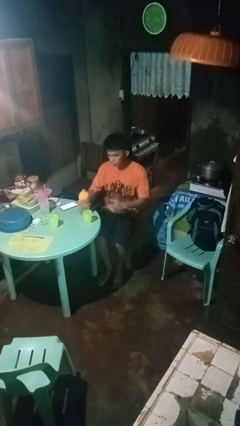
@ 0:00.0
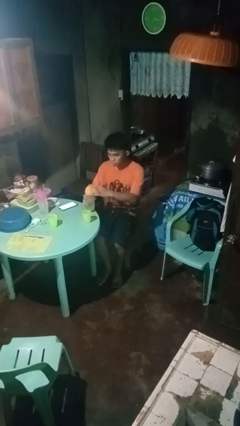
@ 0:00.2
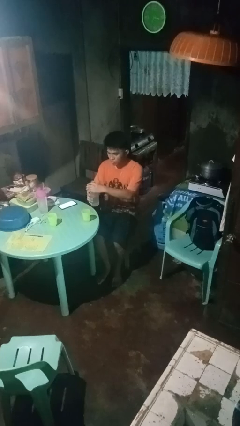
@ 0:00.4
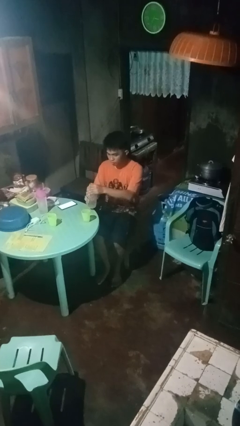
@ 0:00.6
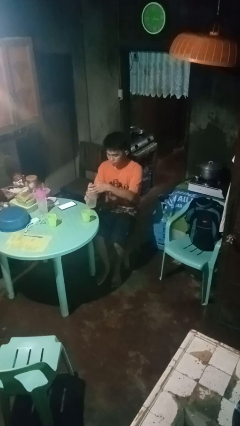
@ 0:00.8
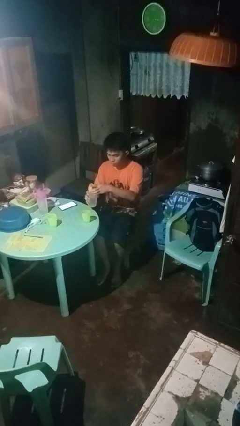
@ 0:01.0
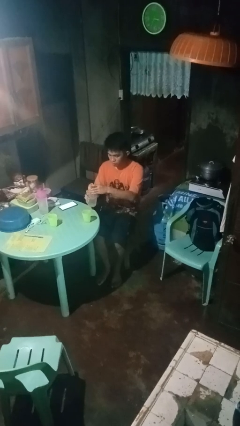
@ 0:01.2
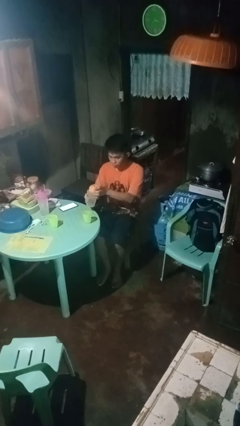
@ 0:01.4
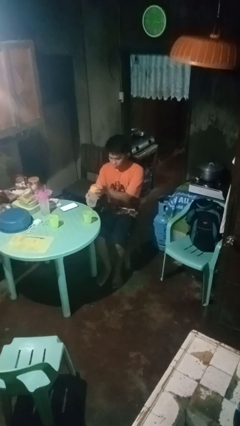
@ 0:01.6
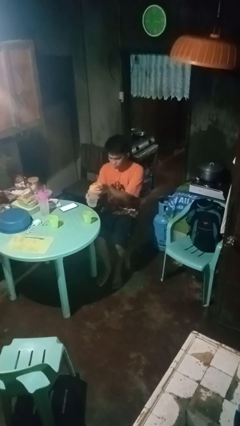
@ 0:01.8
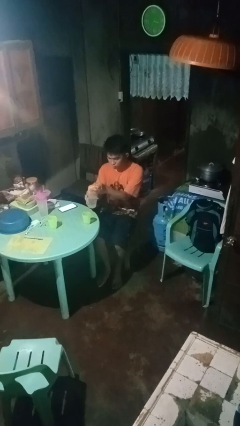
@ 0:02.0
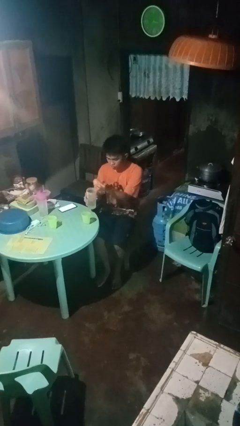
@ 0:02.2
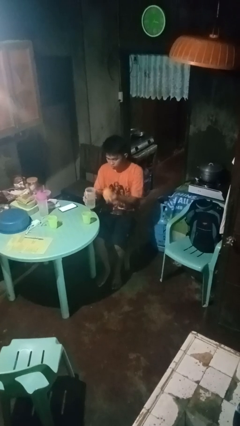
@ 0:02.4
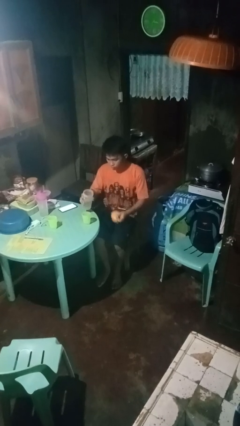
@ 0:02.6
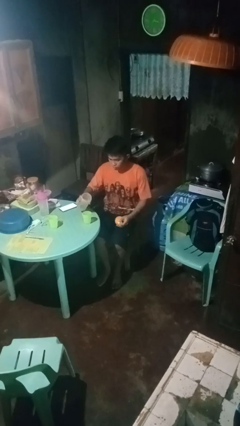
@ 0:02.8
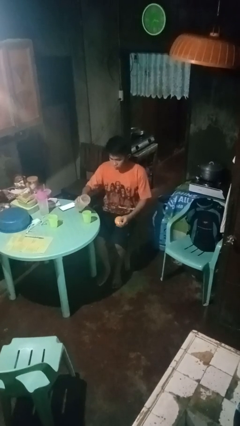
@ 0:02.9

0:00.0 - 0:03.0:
person unscrews lid from bottle

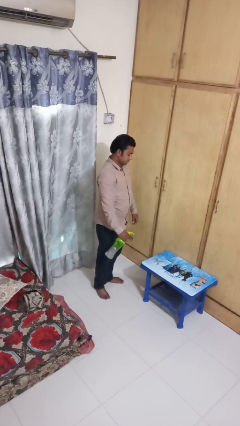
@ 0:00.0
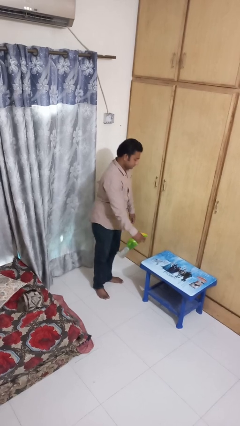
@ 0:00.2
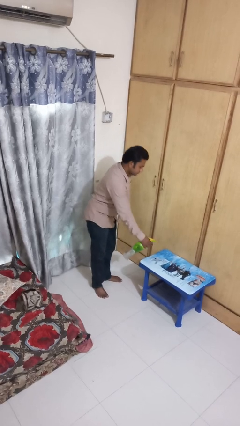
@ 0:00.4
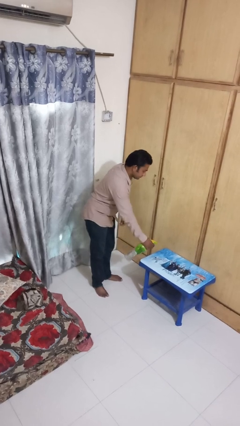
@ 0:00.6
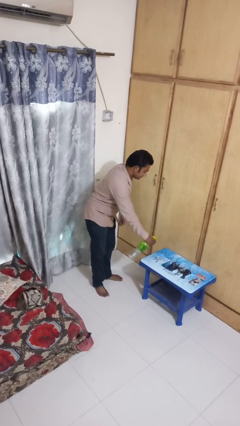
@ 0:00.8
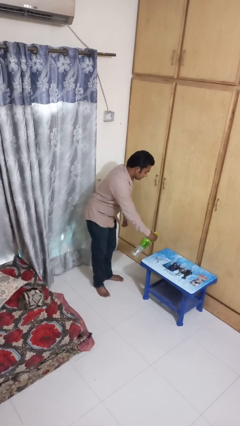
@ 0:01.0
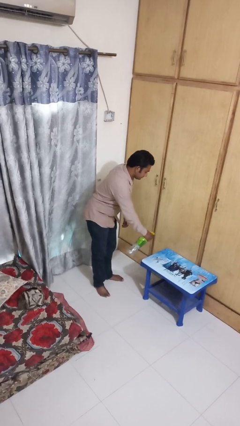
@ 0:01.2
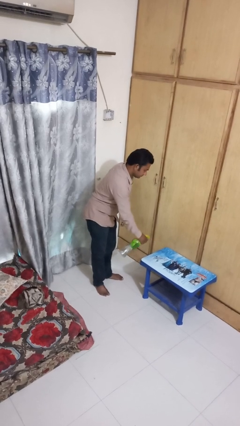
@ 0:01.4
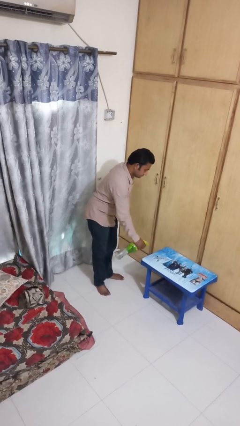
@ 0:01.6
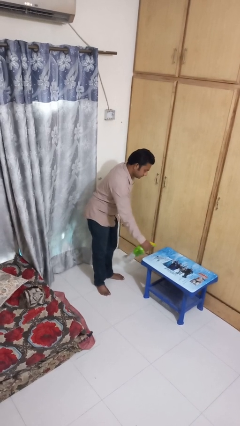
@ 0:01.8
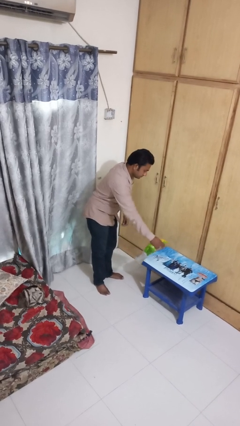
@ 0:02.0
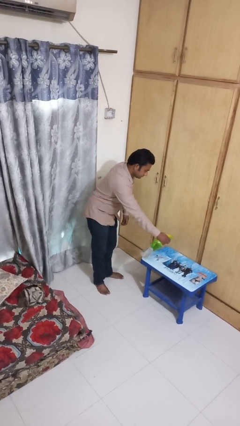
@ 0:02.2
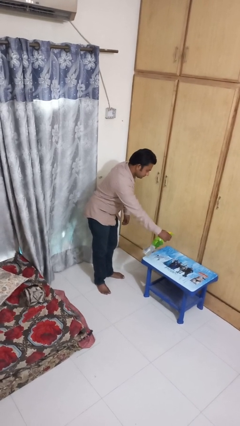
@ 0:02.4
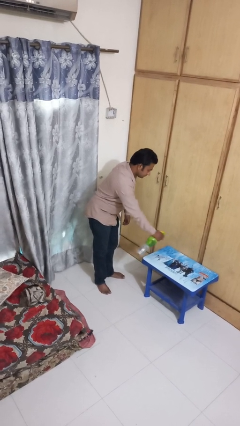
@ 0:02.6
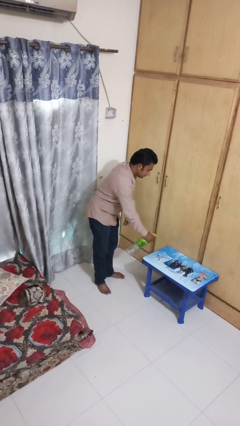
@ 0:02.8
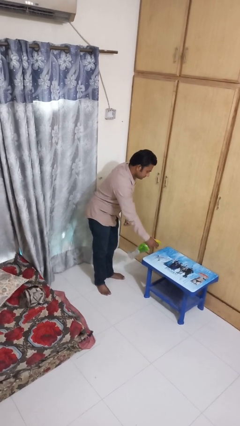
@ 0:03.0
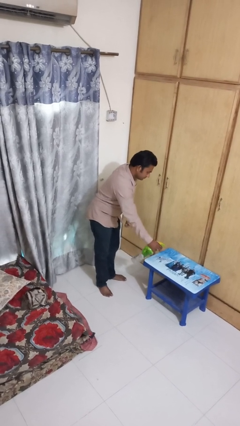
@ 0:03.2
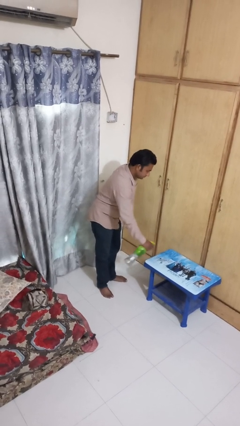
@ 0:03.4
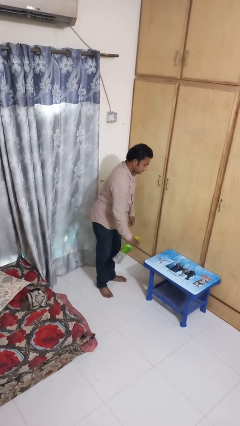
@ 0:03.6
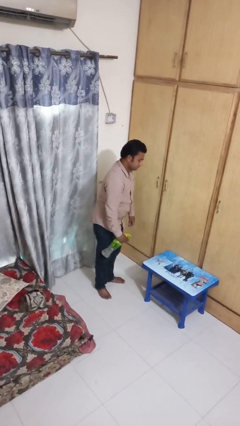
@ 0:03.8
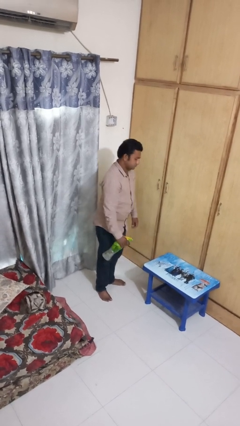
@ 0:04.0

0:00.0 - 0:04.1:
person sprays from bottle

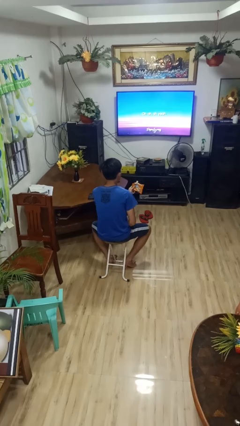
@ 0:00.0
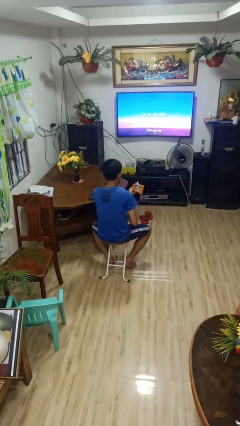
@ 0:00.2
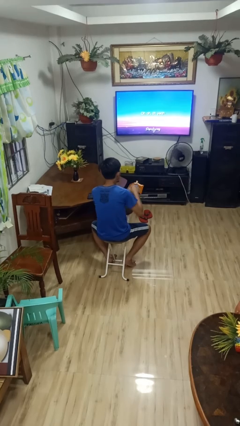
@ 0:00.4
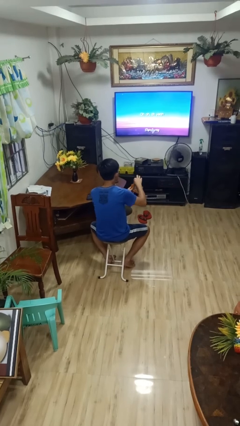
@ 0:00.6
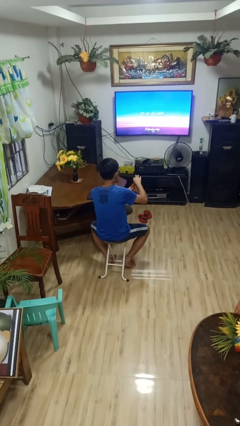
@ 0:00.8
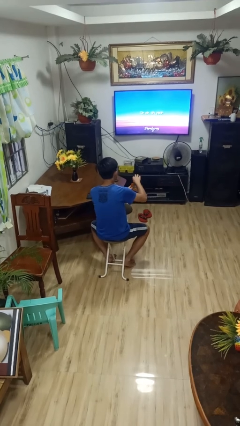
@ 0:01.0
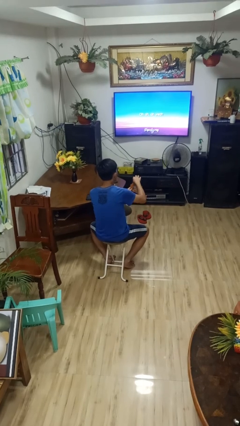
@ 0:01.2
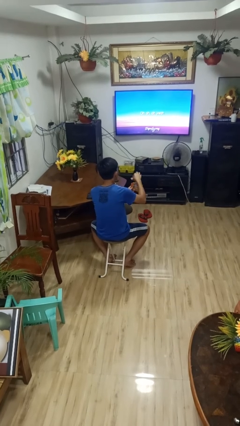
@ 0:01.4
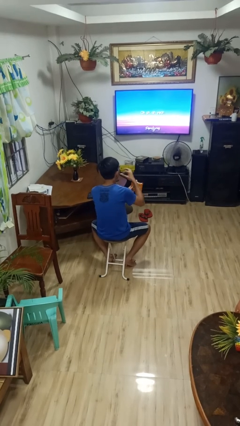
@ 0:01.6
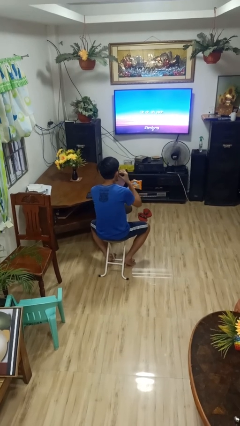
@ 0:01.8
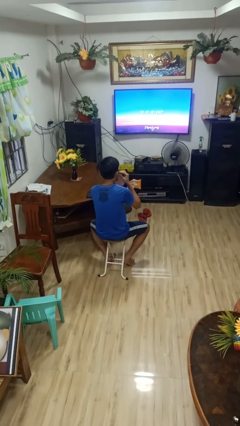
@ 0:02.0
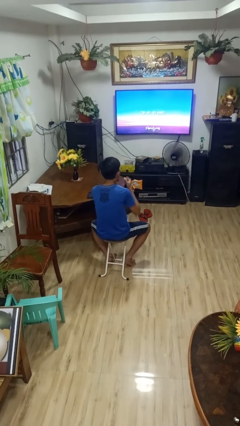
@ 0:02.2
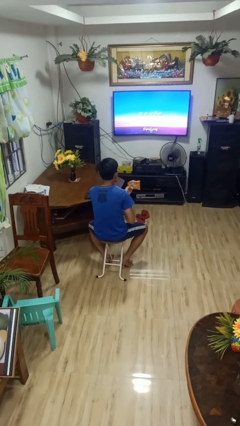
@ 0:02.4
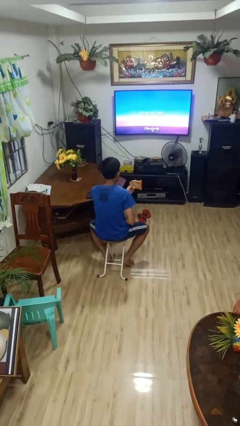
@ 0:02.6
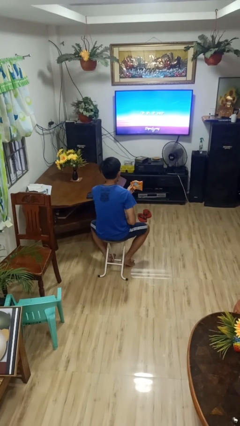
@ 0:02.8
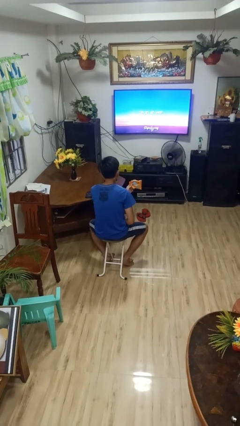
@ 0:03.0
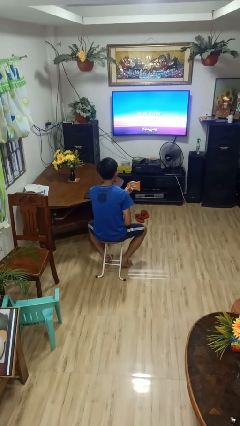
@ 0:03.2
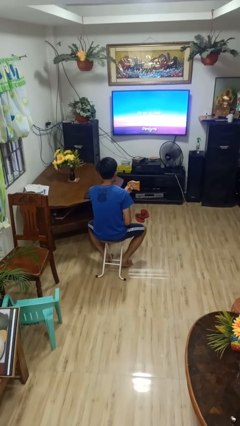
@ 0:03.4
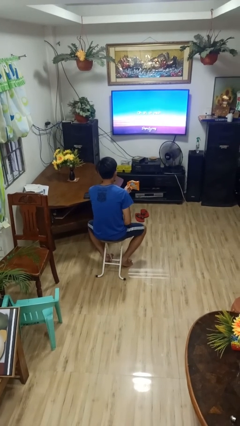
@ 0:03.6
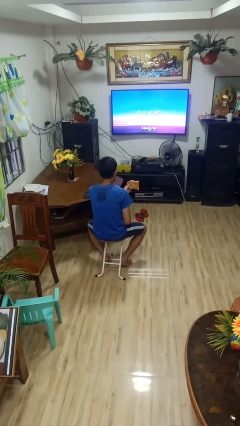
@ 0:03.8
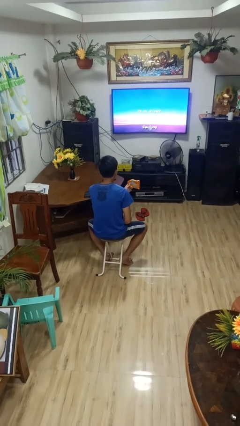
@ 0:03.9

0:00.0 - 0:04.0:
person eats snack from bag

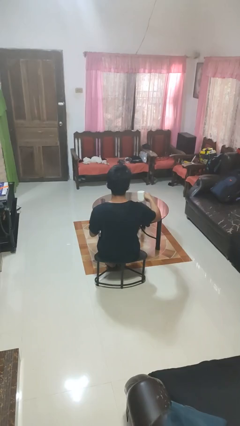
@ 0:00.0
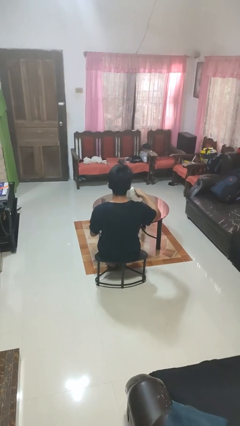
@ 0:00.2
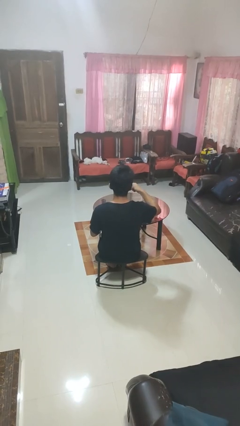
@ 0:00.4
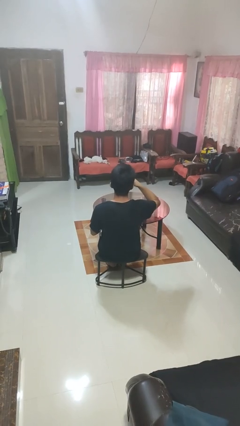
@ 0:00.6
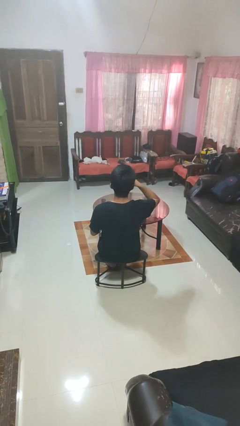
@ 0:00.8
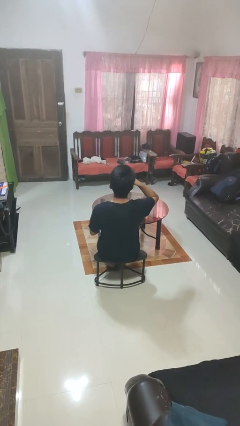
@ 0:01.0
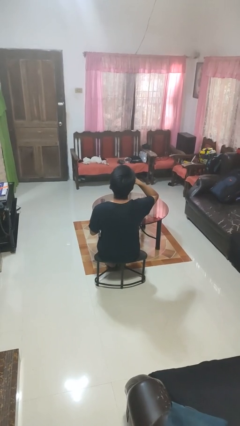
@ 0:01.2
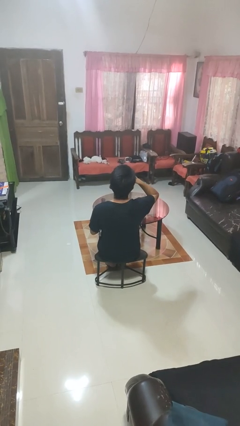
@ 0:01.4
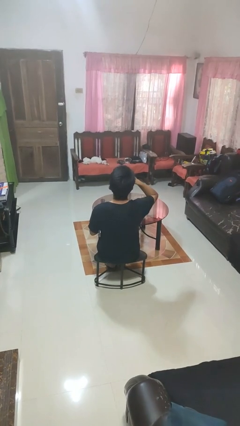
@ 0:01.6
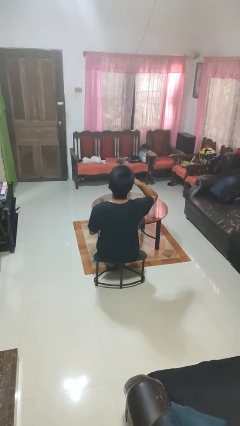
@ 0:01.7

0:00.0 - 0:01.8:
person drinks from mug

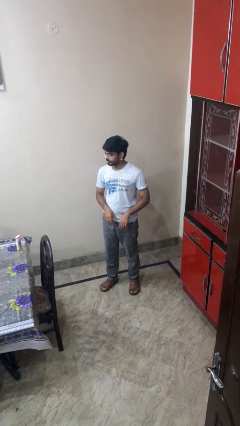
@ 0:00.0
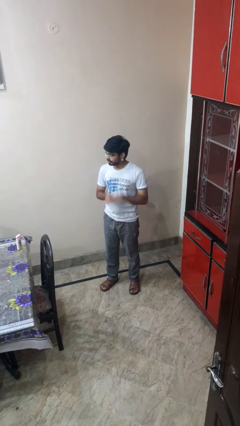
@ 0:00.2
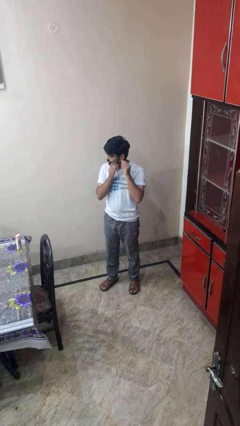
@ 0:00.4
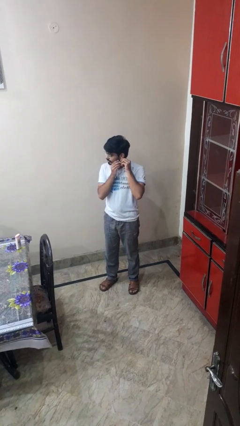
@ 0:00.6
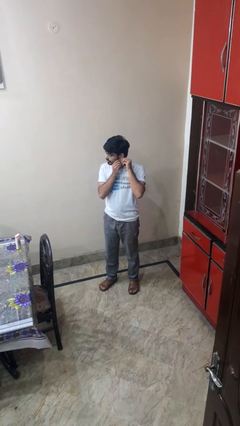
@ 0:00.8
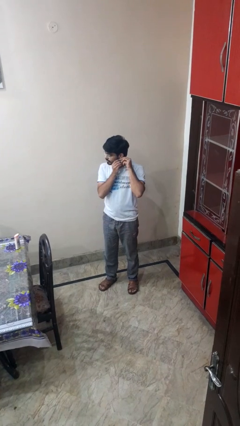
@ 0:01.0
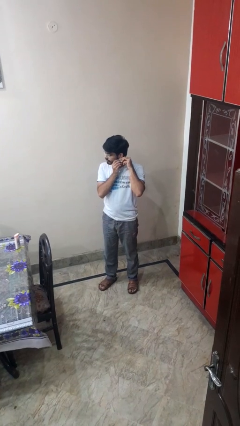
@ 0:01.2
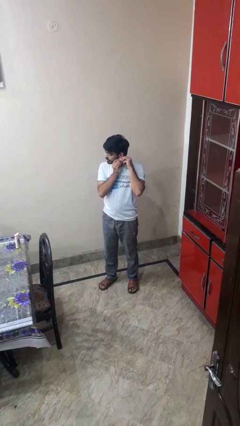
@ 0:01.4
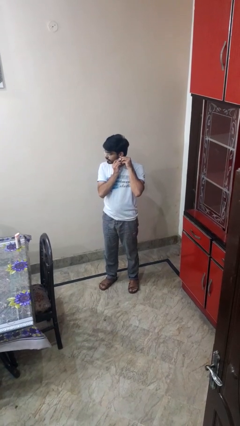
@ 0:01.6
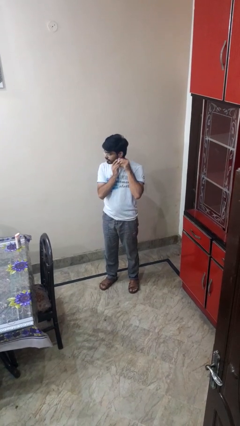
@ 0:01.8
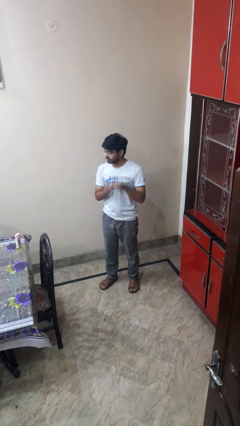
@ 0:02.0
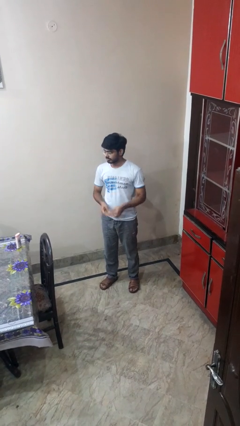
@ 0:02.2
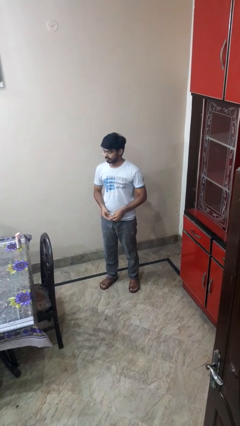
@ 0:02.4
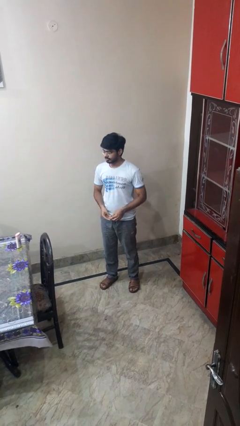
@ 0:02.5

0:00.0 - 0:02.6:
person takes off earrings

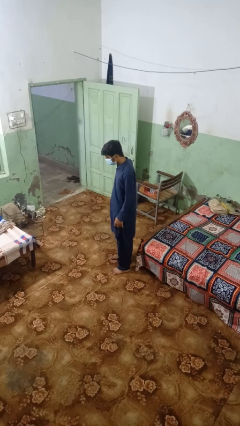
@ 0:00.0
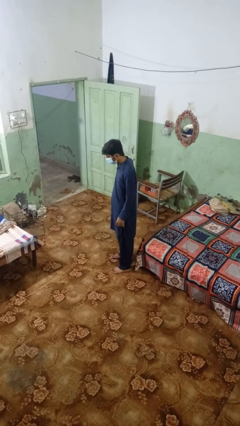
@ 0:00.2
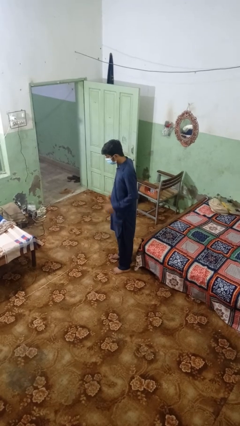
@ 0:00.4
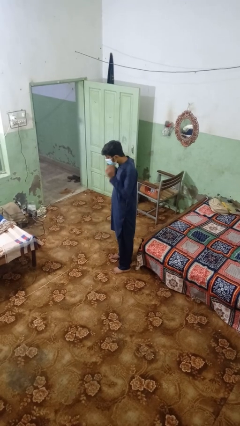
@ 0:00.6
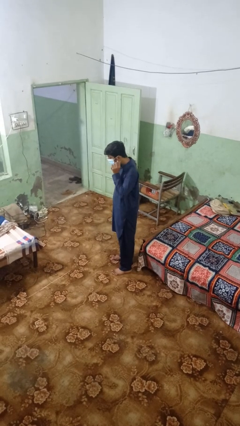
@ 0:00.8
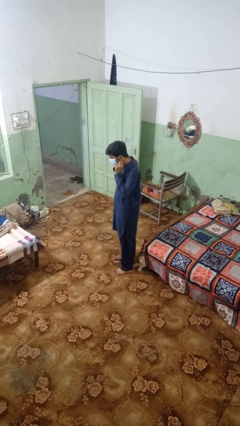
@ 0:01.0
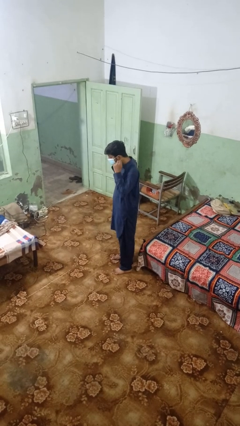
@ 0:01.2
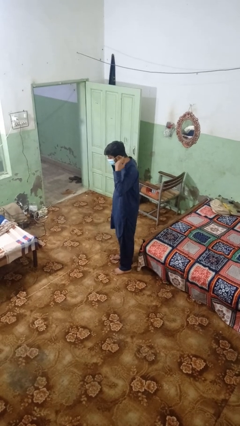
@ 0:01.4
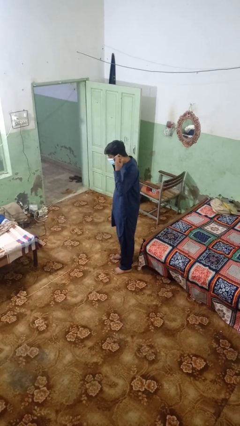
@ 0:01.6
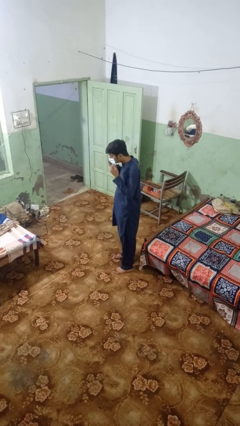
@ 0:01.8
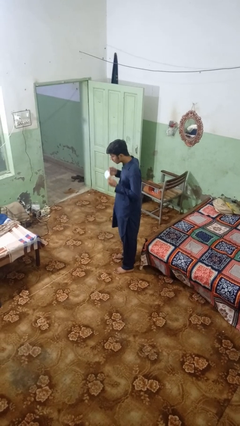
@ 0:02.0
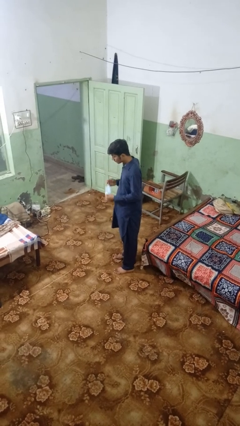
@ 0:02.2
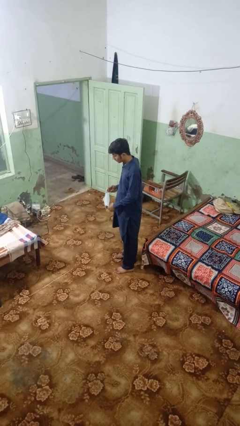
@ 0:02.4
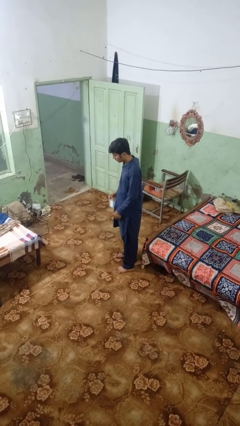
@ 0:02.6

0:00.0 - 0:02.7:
person takes off facemask
